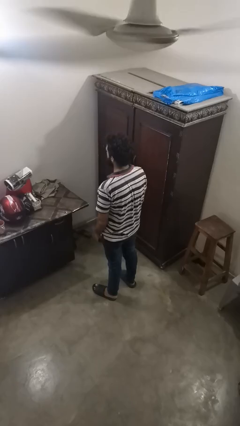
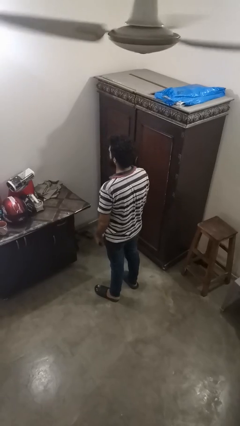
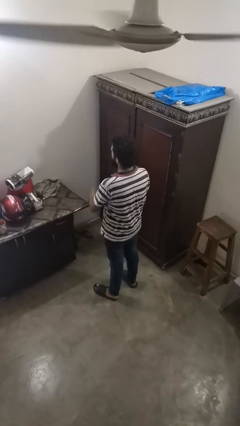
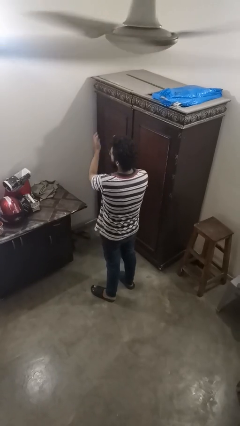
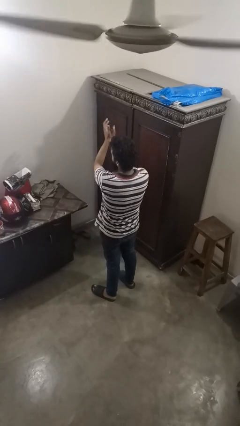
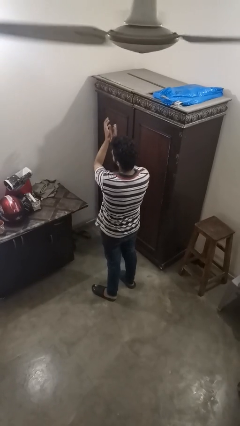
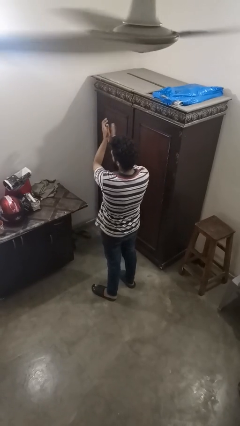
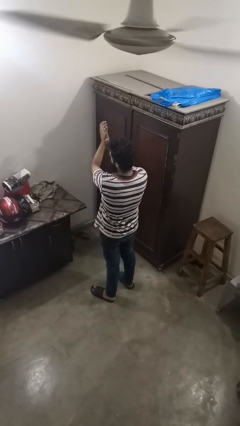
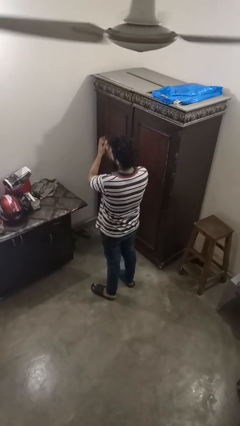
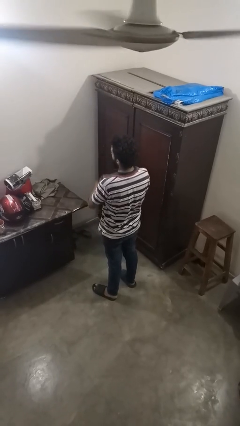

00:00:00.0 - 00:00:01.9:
person claps hands

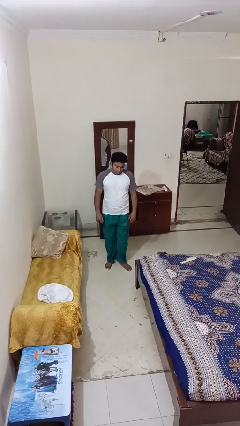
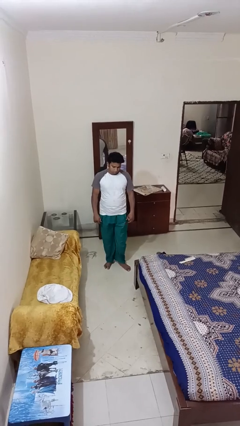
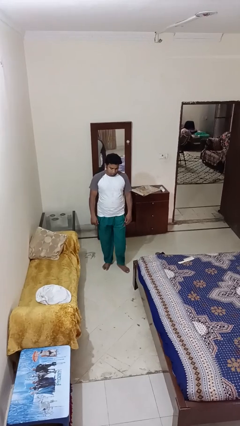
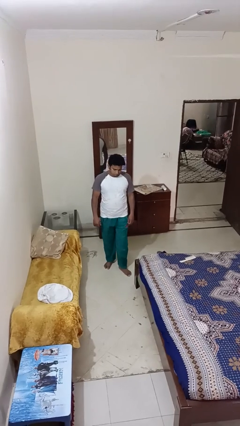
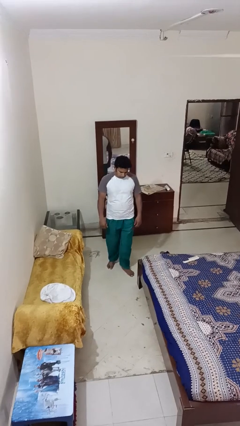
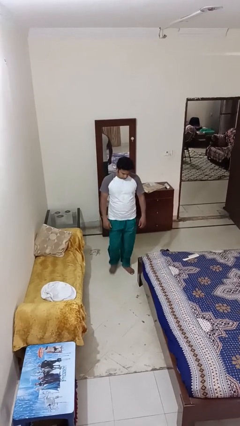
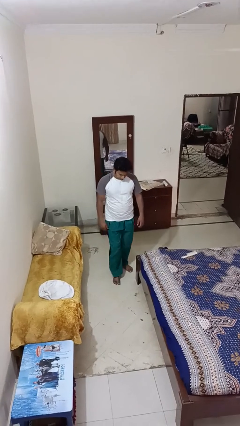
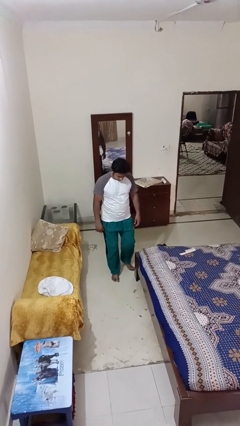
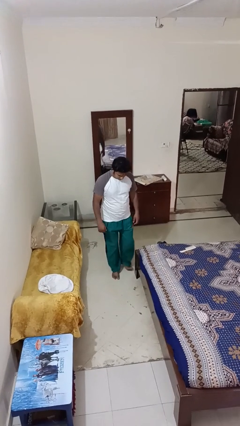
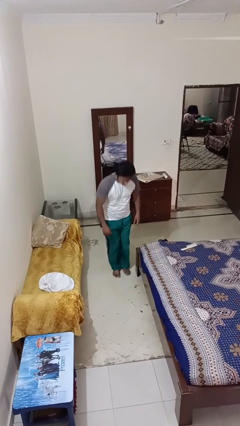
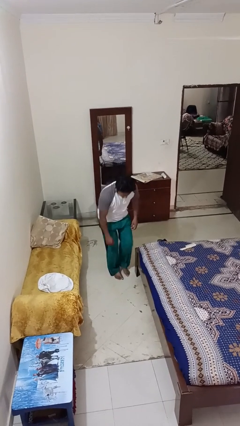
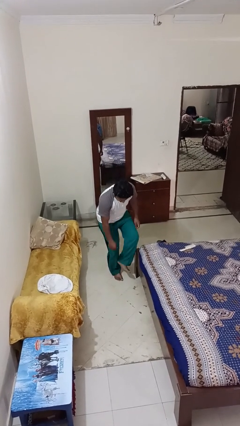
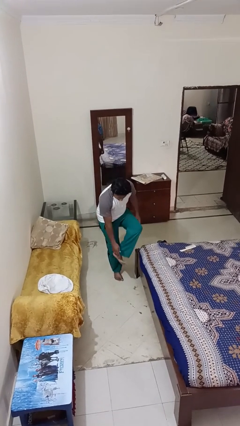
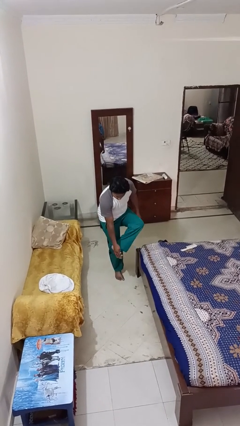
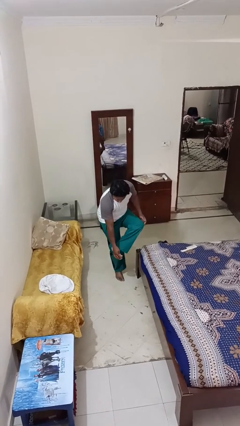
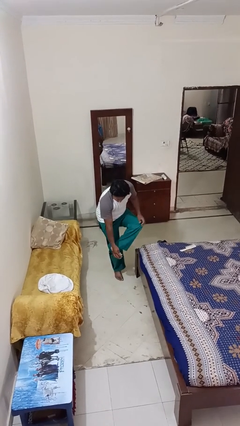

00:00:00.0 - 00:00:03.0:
person stubs toe

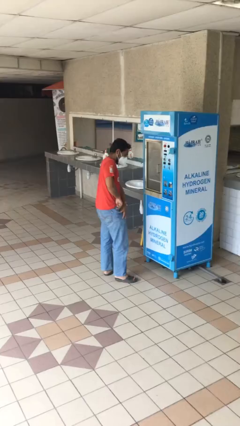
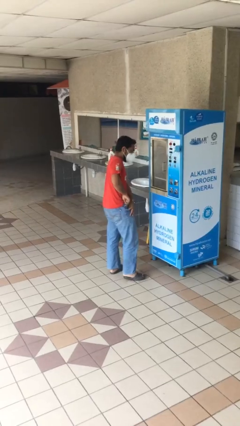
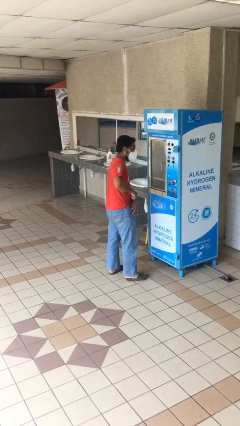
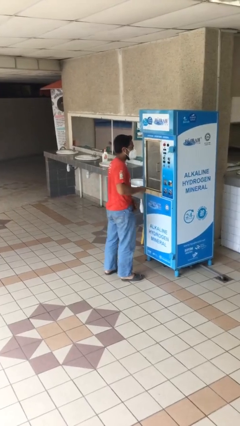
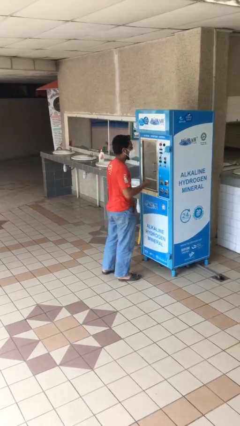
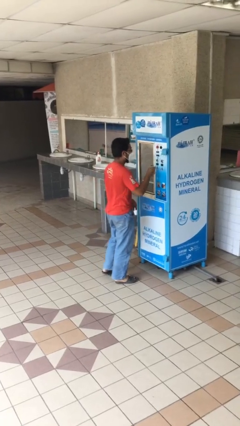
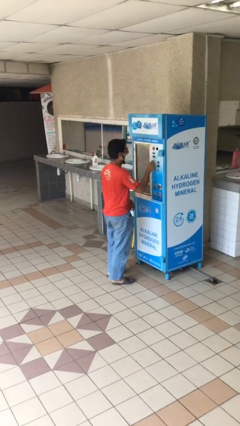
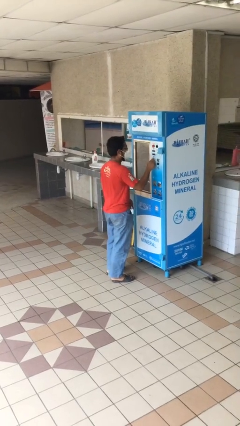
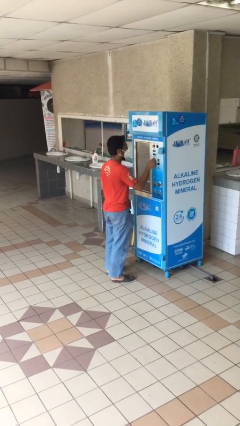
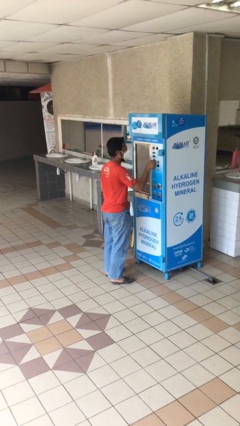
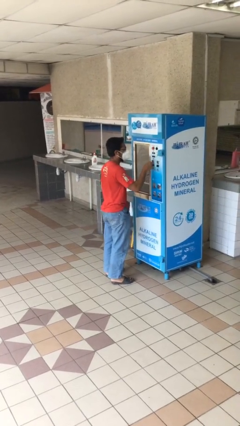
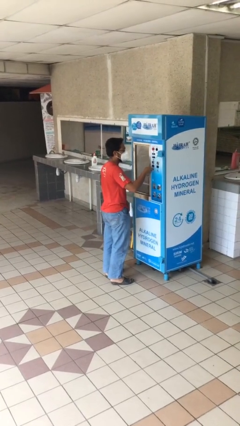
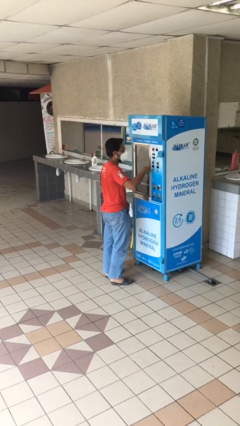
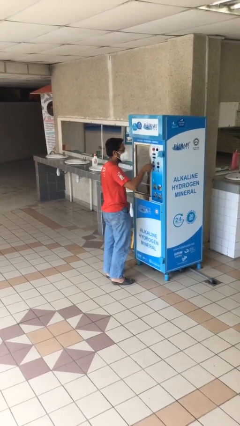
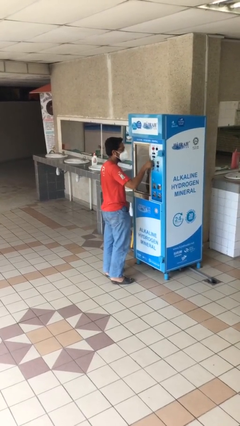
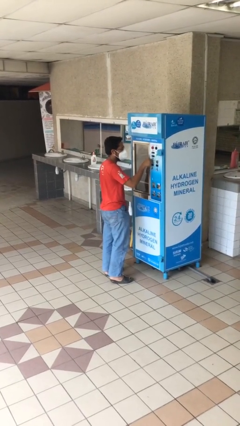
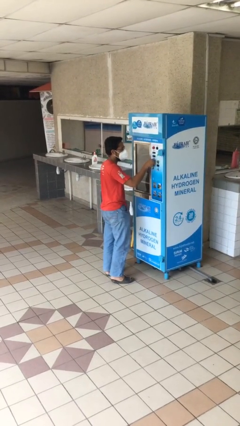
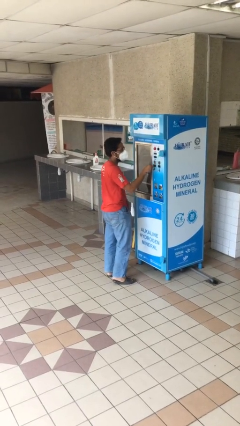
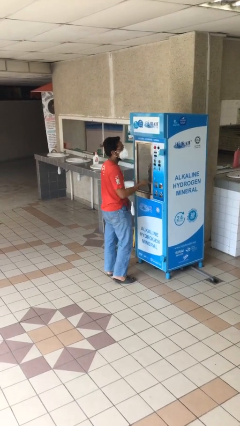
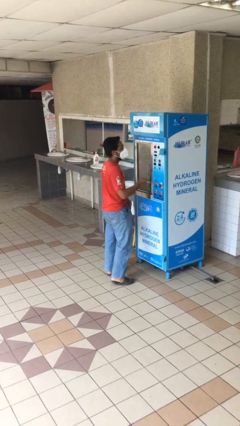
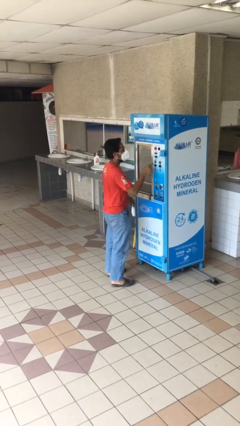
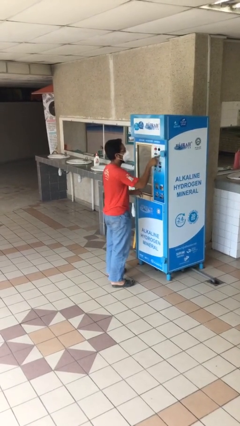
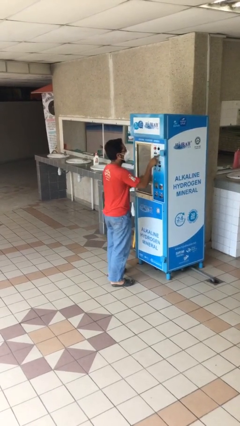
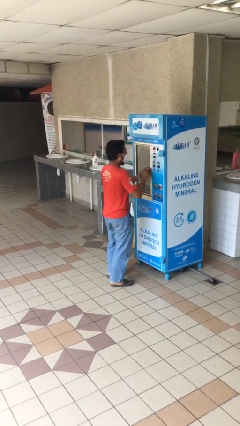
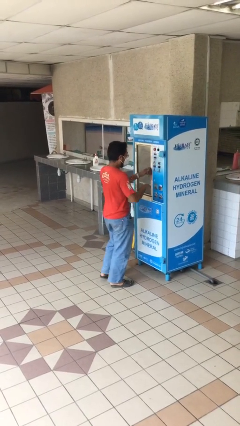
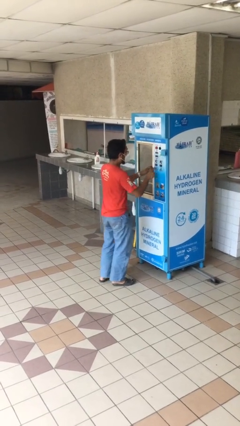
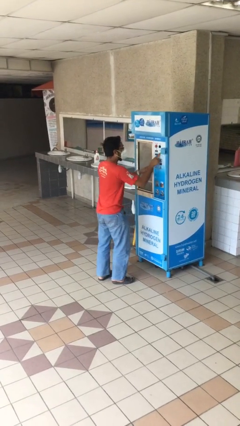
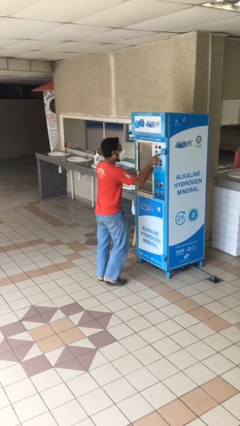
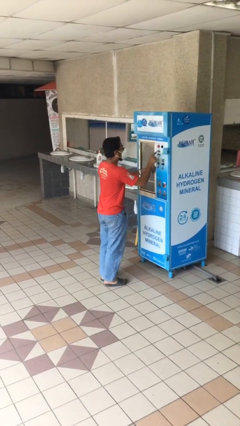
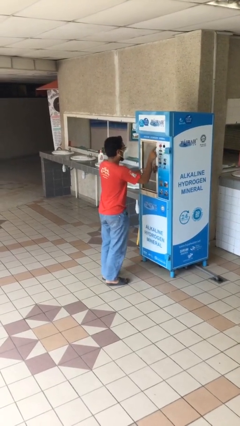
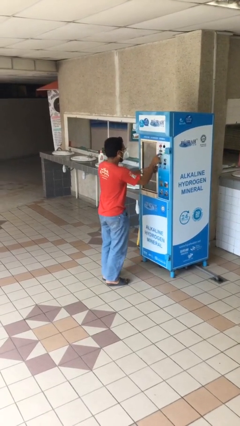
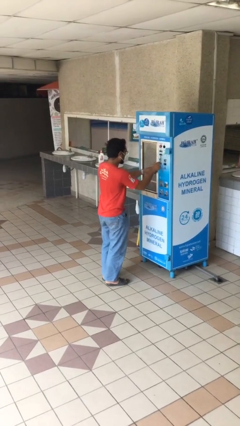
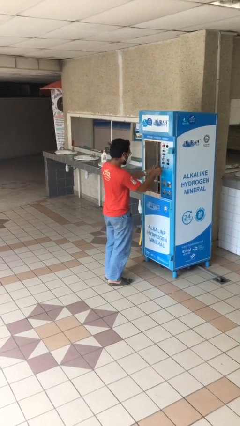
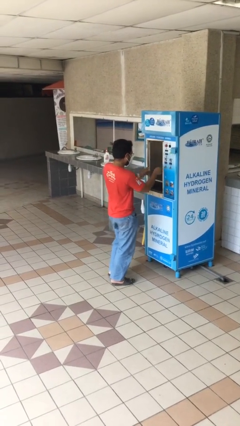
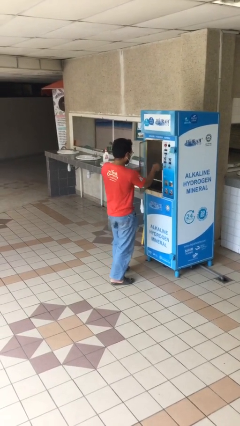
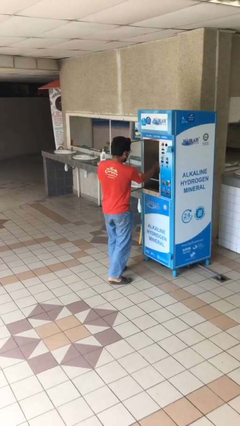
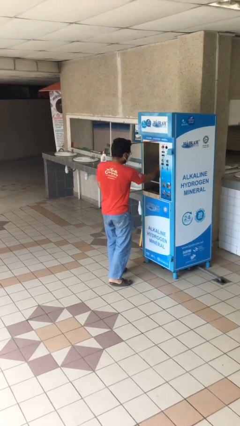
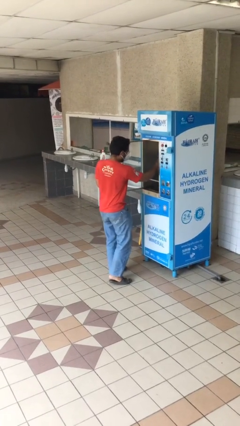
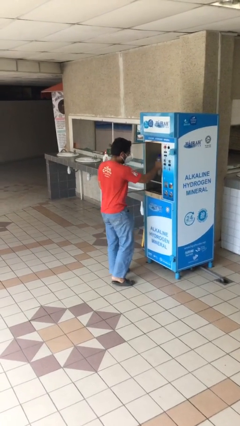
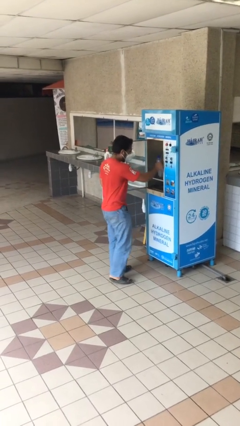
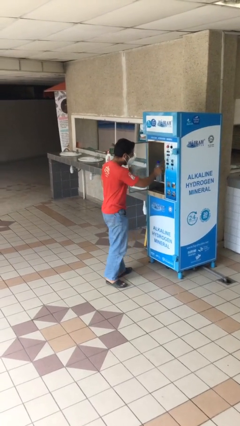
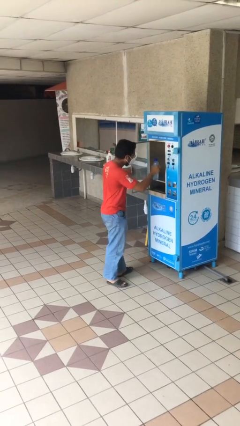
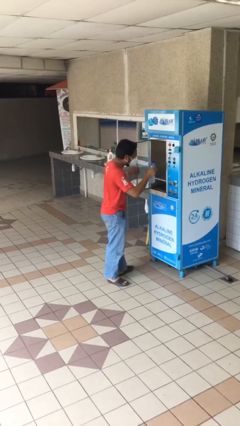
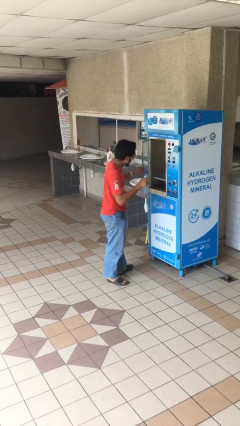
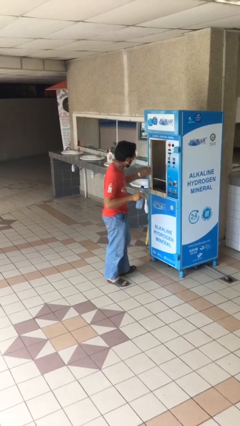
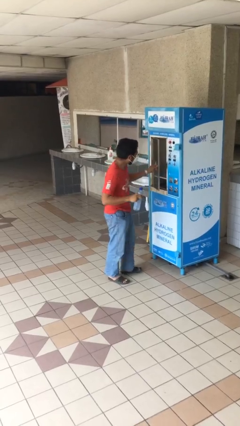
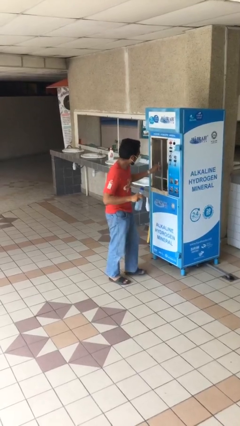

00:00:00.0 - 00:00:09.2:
person purchases from machine

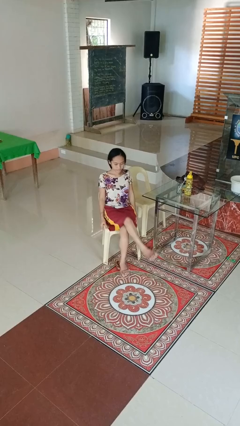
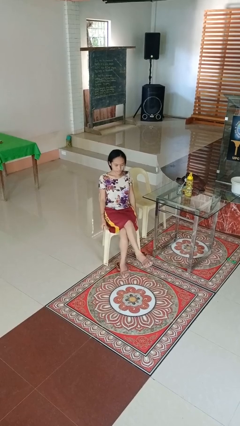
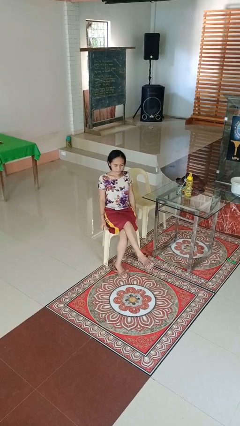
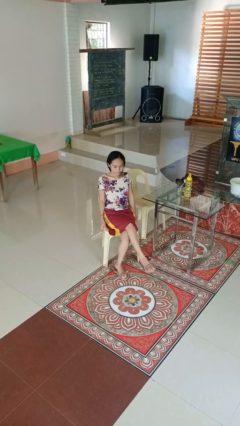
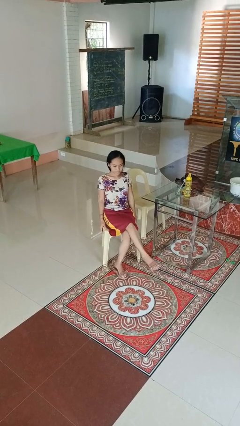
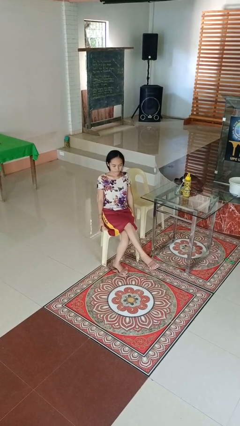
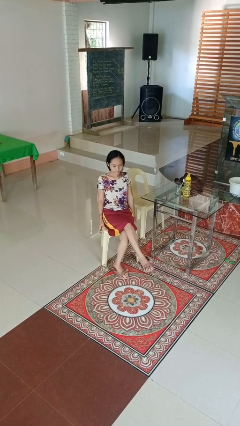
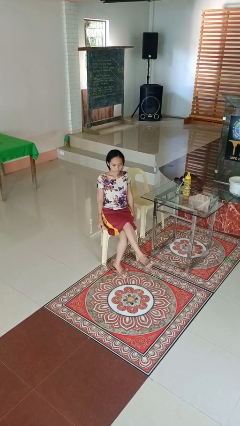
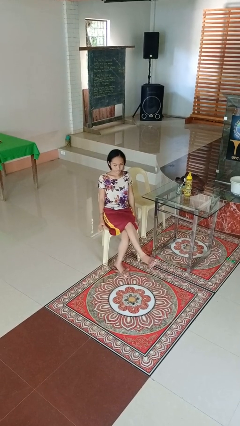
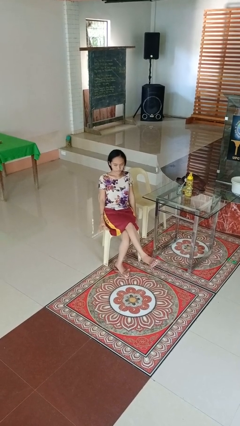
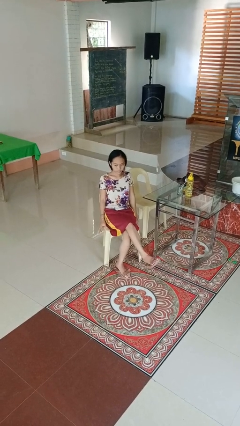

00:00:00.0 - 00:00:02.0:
person crosses legs

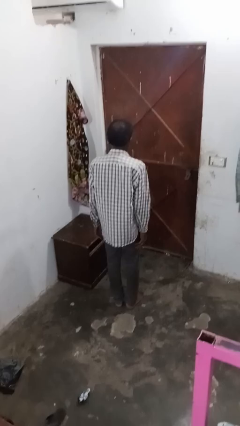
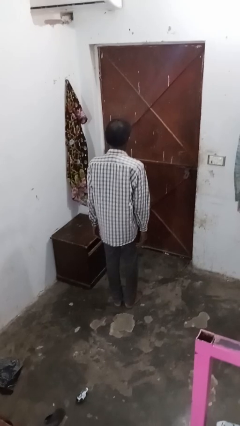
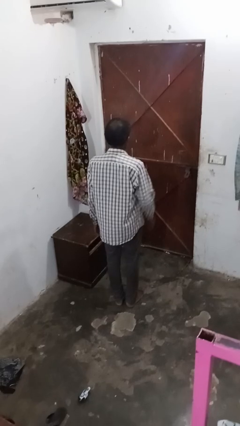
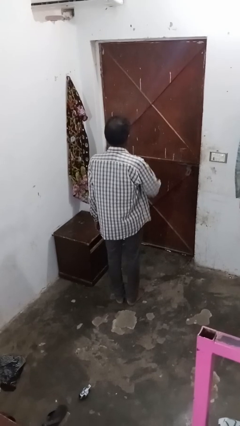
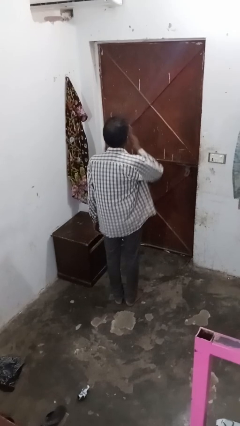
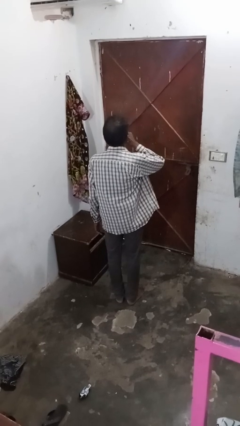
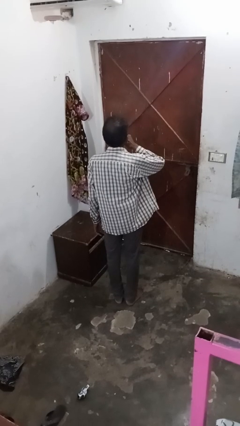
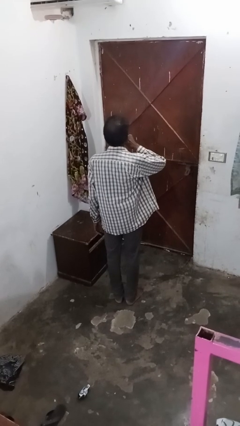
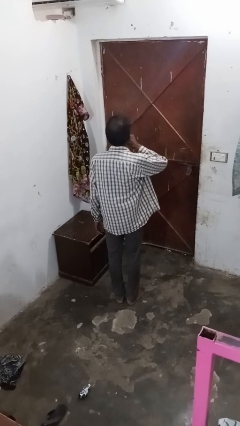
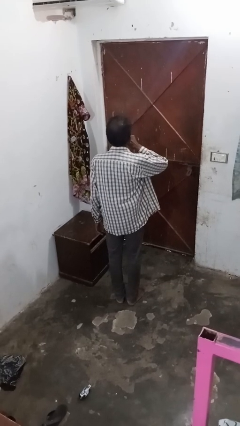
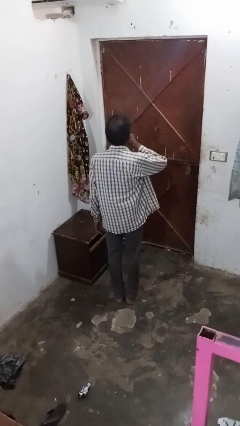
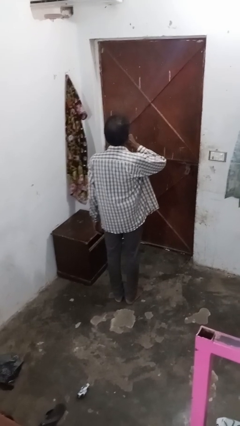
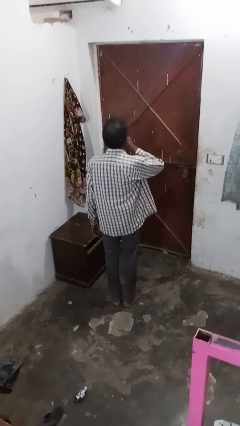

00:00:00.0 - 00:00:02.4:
person gestures be quiet
